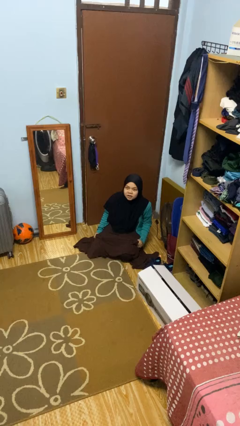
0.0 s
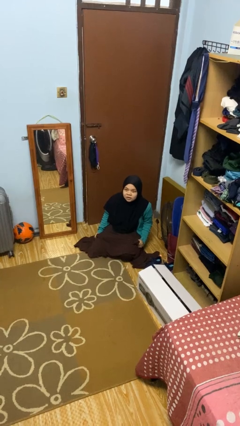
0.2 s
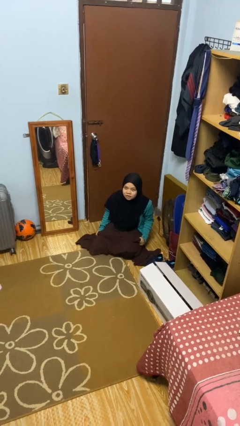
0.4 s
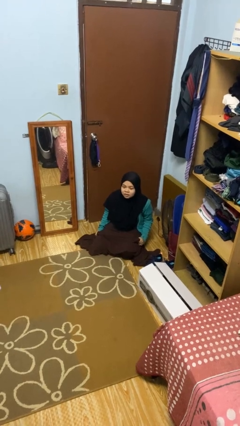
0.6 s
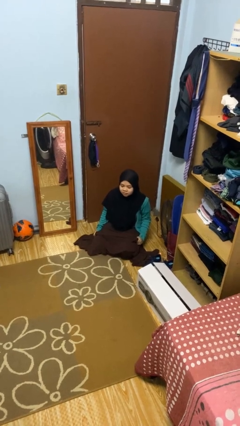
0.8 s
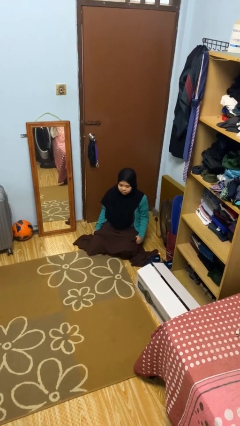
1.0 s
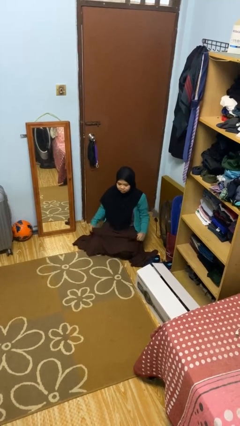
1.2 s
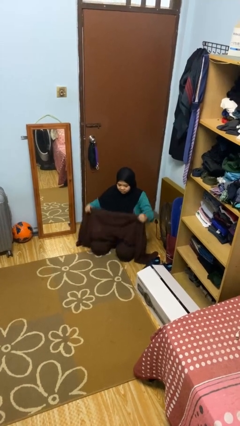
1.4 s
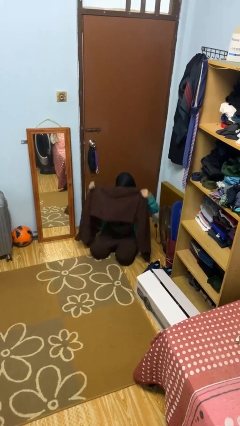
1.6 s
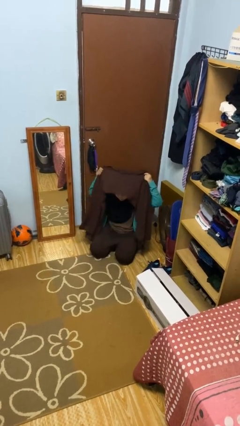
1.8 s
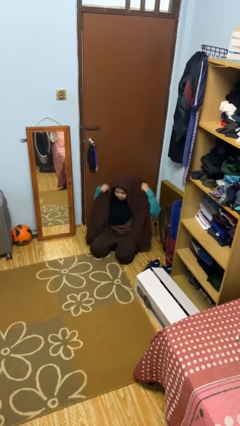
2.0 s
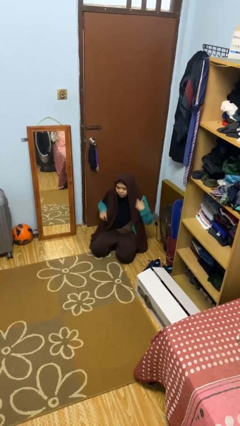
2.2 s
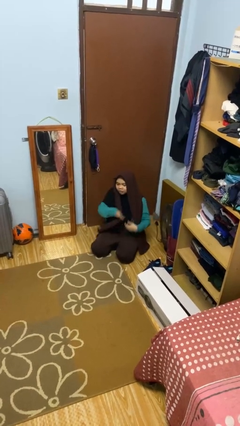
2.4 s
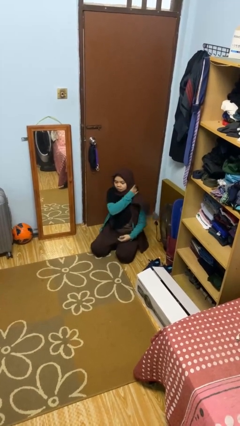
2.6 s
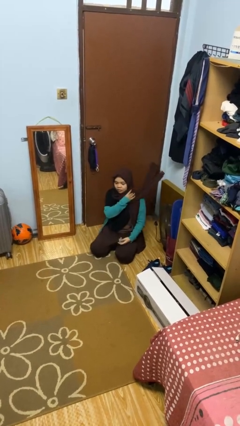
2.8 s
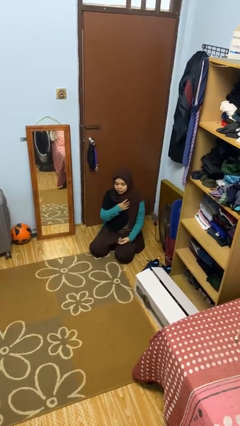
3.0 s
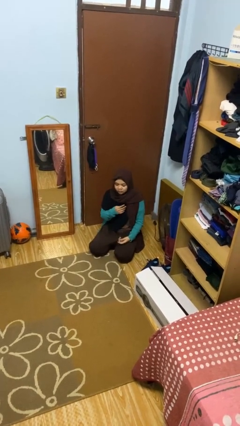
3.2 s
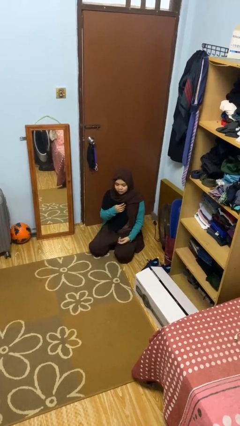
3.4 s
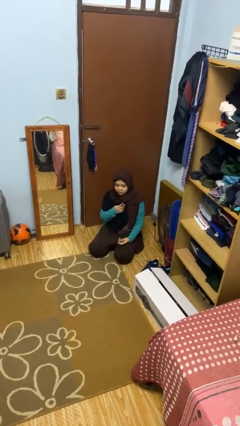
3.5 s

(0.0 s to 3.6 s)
person puts on scarf

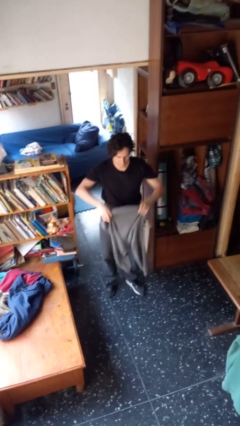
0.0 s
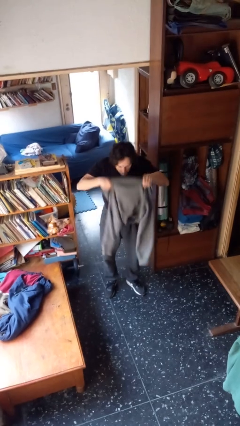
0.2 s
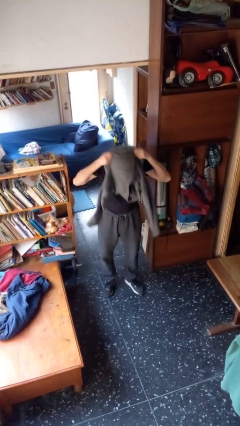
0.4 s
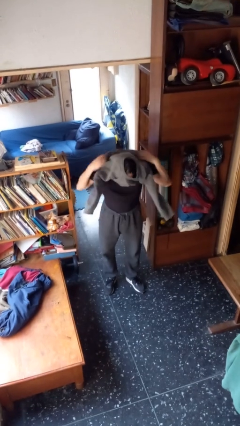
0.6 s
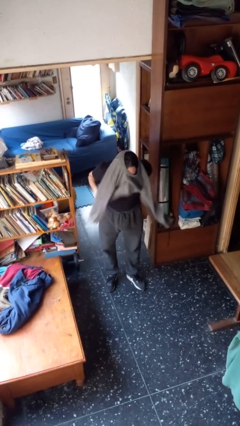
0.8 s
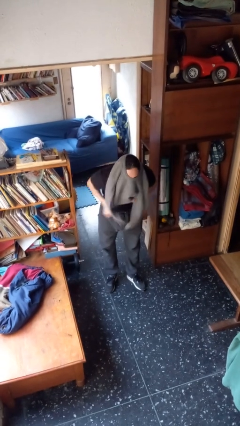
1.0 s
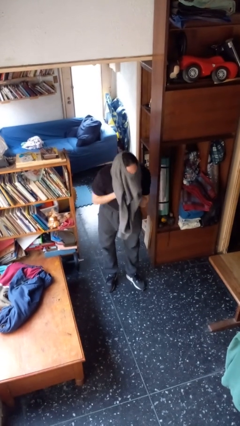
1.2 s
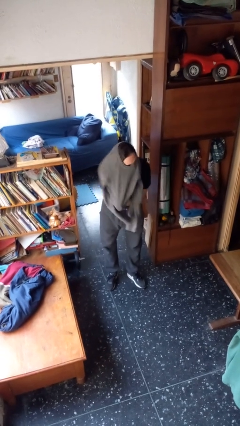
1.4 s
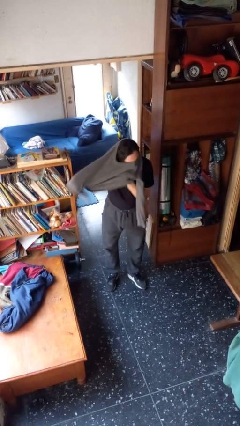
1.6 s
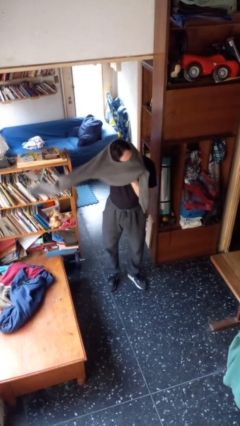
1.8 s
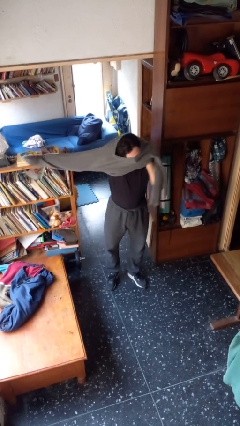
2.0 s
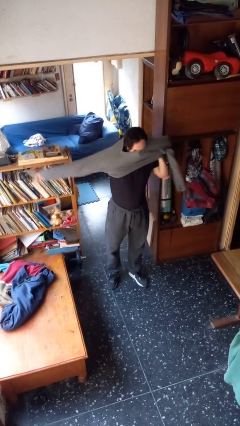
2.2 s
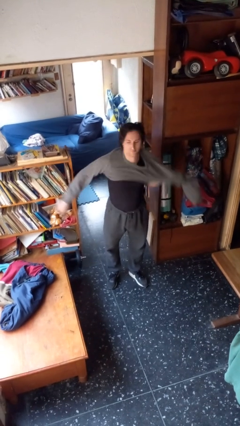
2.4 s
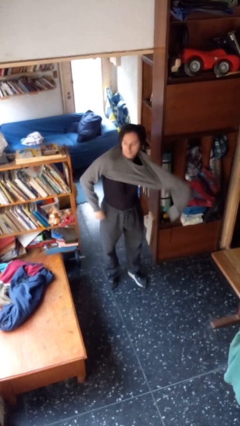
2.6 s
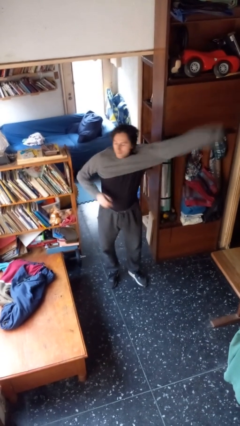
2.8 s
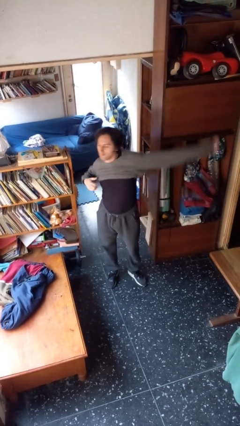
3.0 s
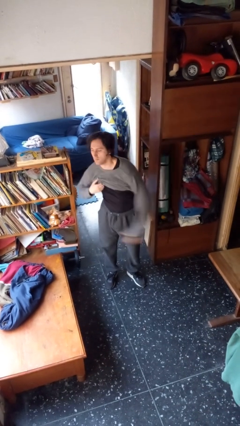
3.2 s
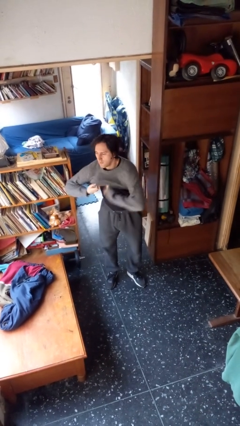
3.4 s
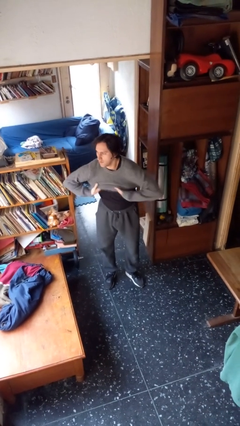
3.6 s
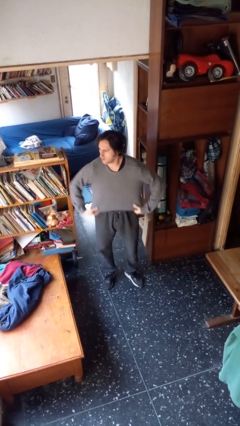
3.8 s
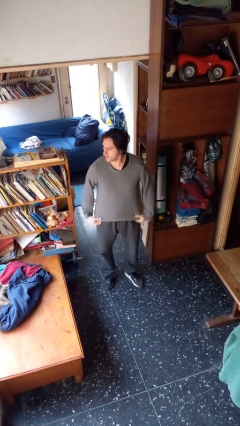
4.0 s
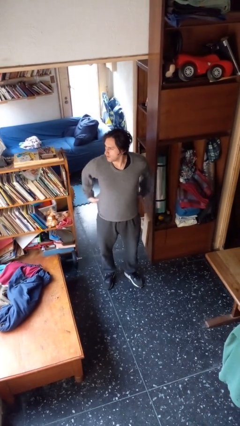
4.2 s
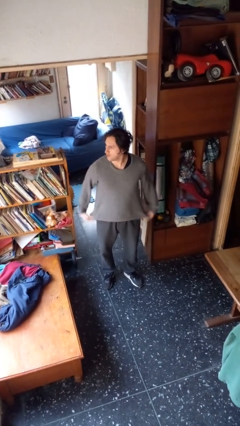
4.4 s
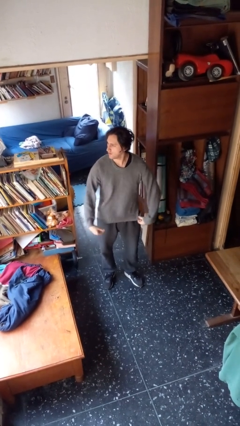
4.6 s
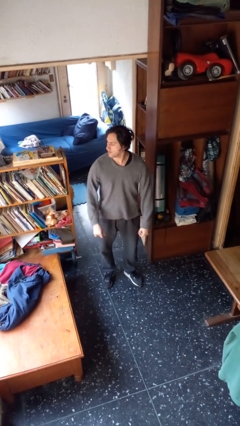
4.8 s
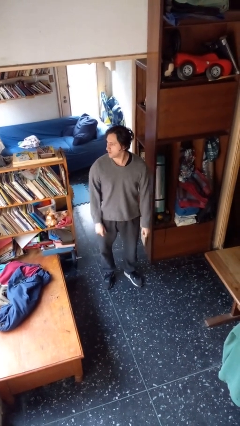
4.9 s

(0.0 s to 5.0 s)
person puts on shirt

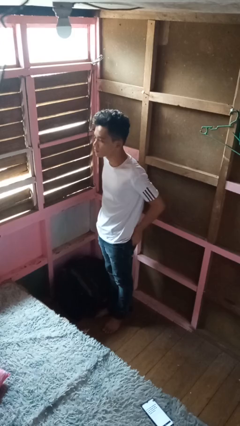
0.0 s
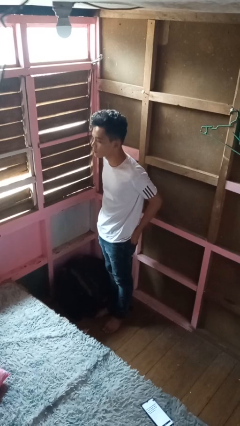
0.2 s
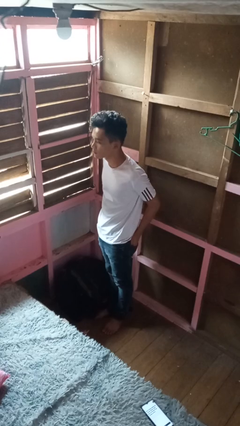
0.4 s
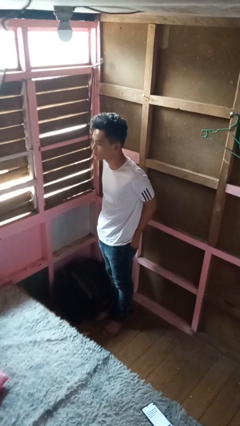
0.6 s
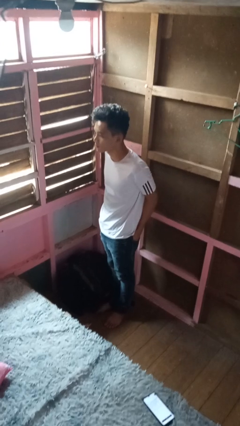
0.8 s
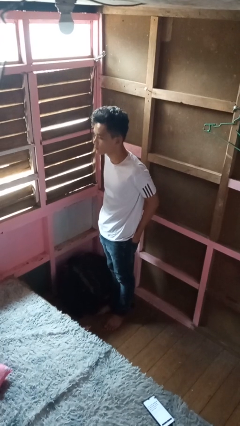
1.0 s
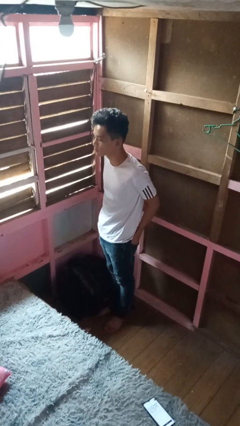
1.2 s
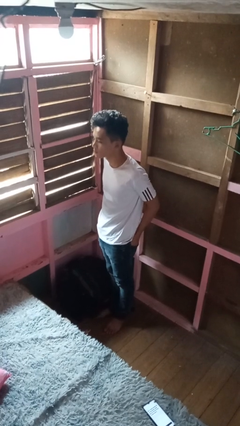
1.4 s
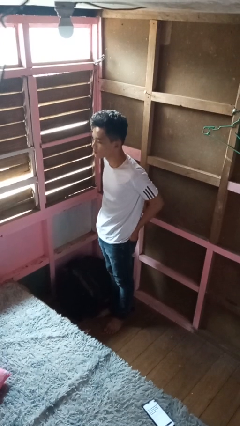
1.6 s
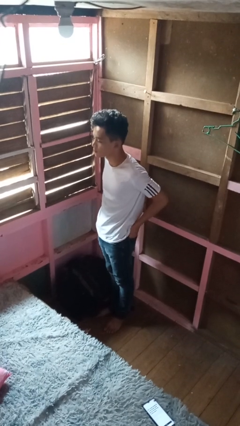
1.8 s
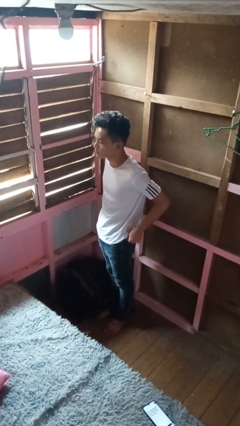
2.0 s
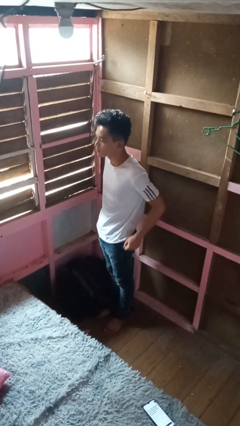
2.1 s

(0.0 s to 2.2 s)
person puts hands in back pockets

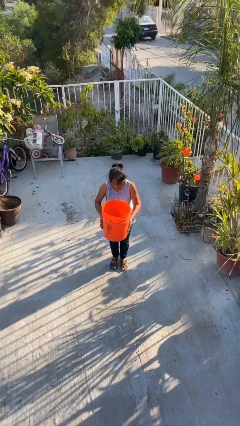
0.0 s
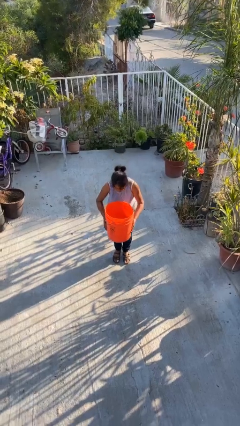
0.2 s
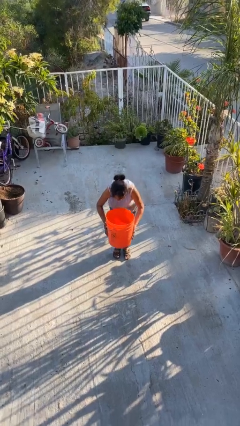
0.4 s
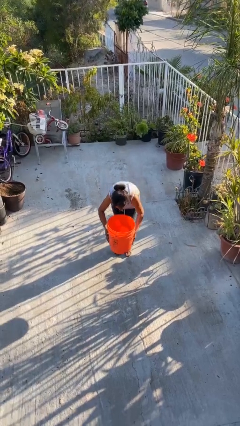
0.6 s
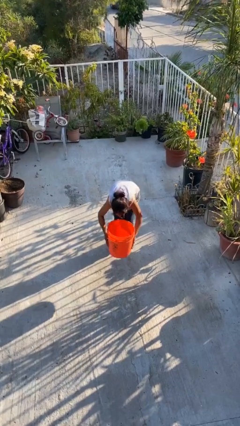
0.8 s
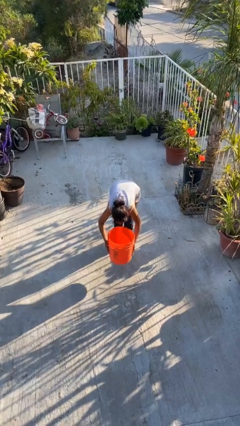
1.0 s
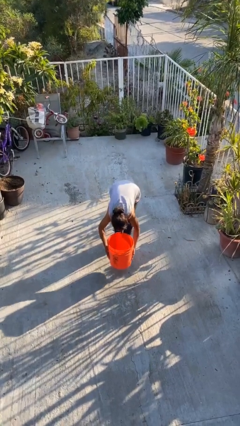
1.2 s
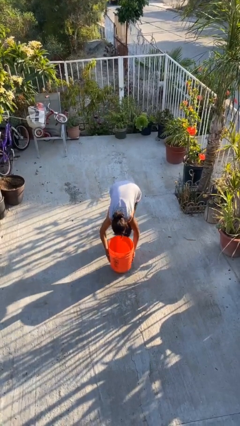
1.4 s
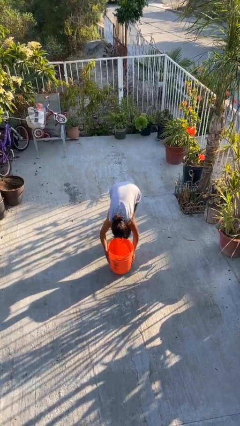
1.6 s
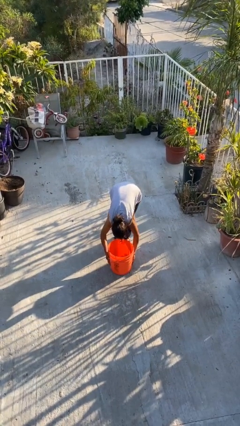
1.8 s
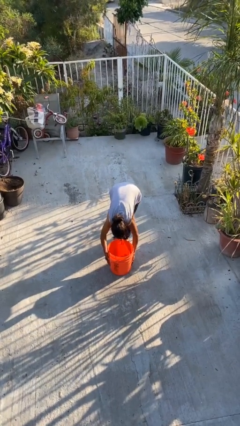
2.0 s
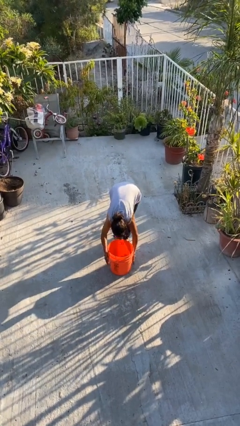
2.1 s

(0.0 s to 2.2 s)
person puts down object on floor

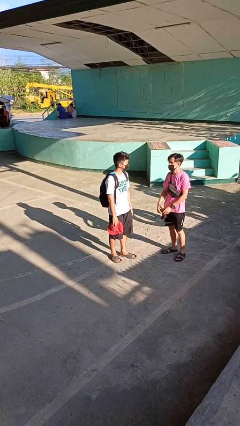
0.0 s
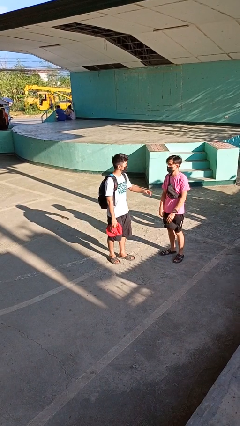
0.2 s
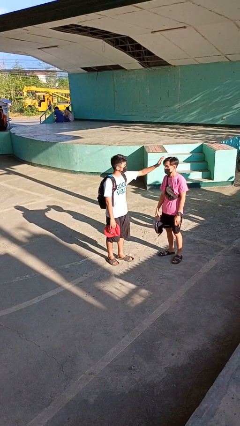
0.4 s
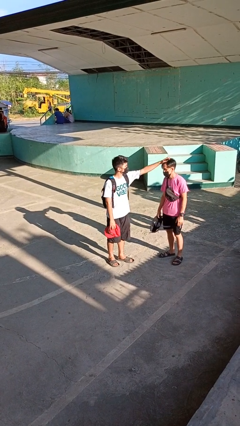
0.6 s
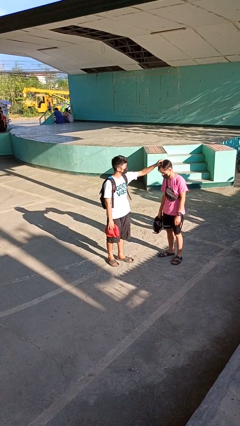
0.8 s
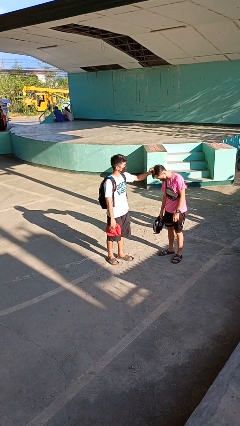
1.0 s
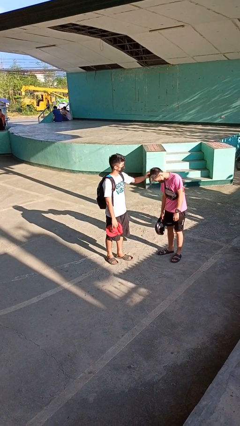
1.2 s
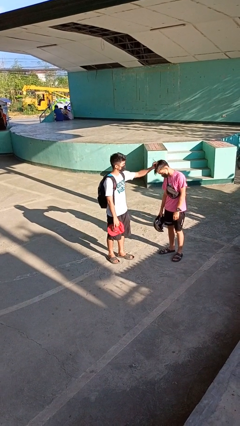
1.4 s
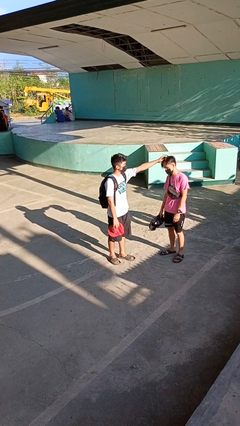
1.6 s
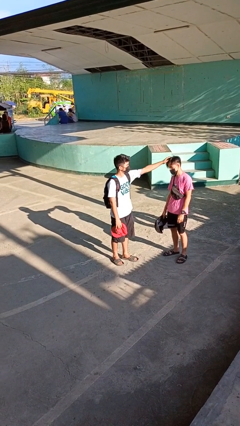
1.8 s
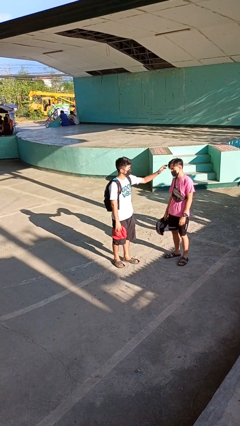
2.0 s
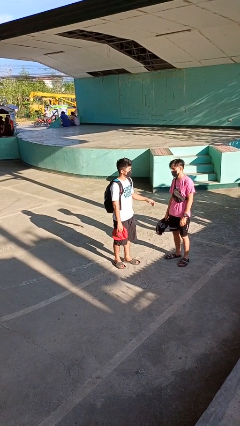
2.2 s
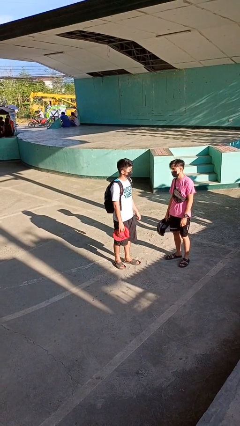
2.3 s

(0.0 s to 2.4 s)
person grabs person by hair

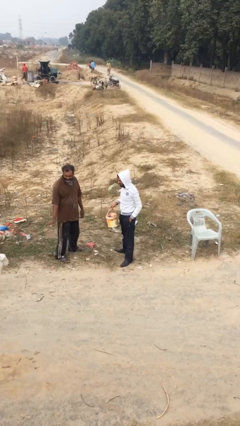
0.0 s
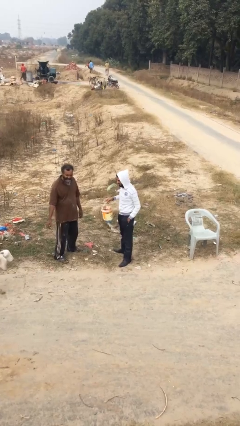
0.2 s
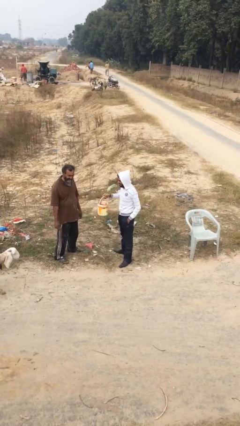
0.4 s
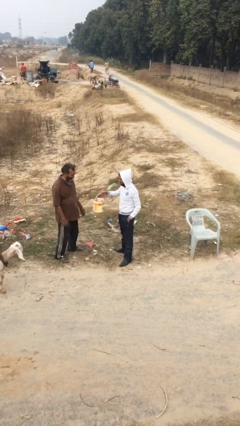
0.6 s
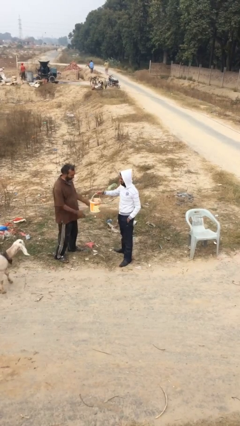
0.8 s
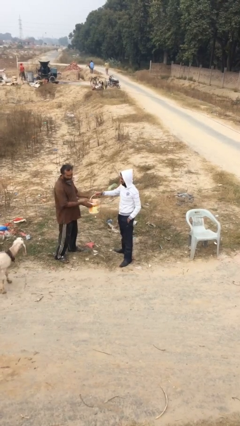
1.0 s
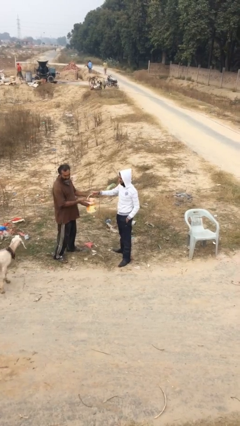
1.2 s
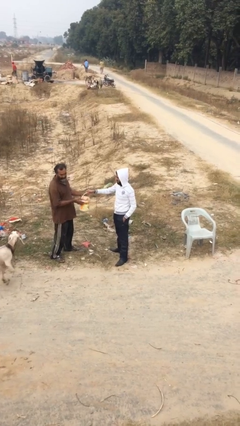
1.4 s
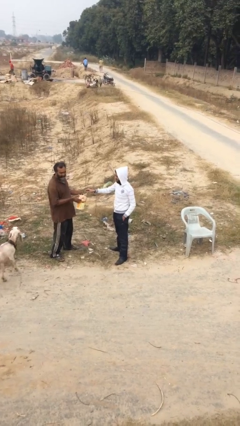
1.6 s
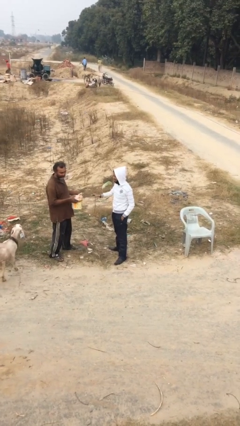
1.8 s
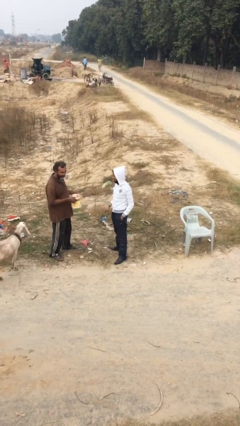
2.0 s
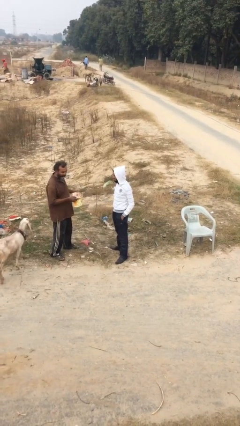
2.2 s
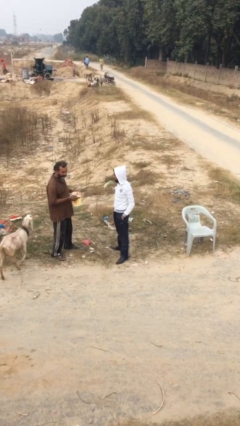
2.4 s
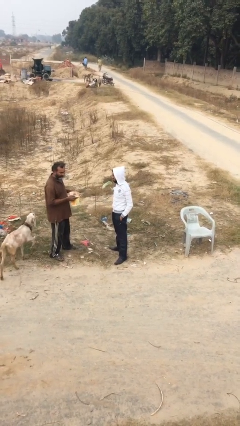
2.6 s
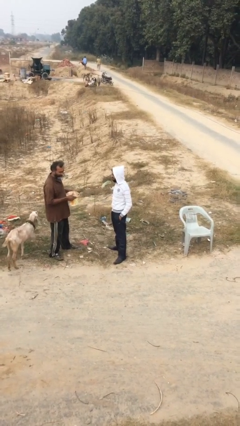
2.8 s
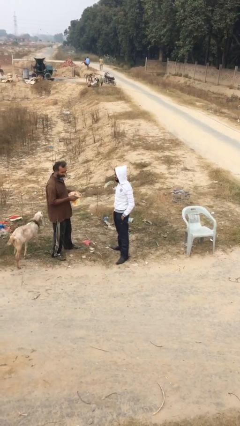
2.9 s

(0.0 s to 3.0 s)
person transfers object to person
